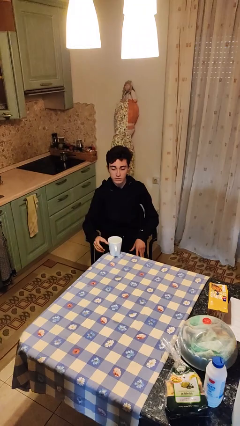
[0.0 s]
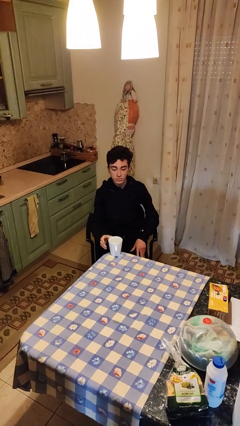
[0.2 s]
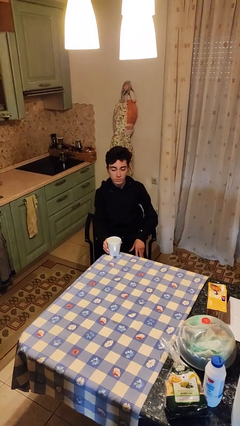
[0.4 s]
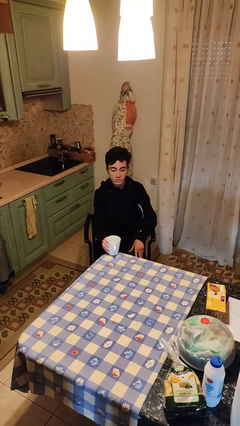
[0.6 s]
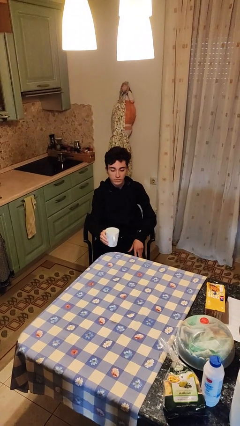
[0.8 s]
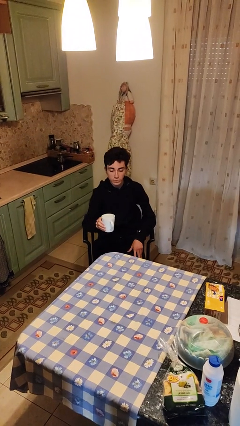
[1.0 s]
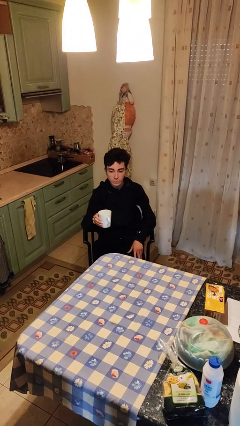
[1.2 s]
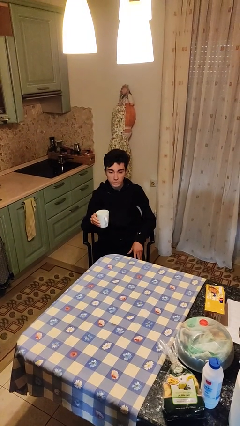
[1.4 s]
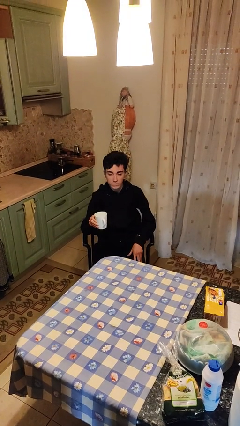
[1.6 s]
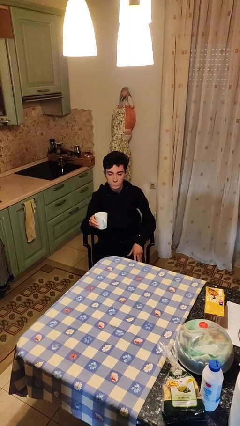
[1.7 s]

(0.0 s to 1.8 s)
person picks up object from table

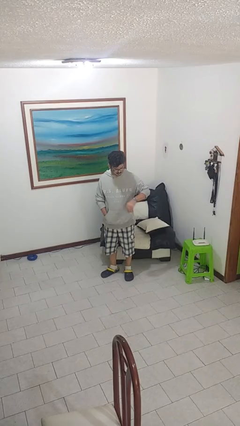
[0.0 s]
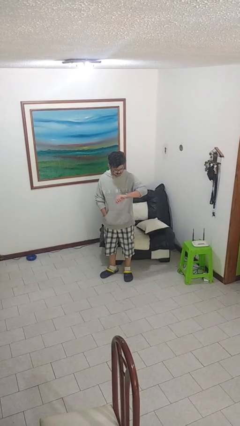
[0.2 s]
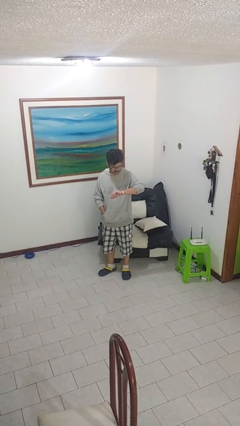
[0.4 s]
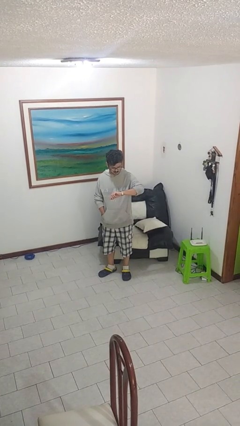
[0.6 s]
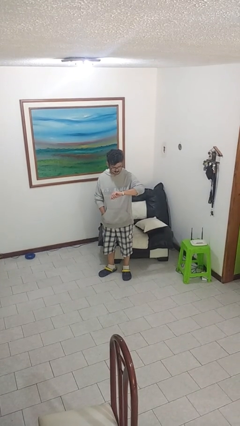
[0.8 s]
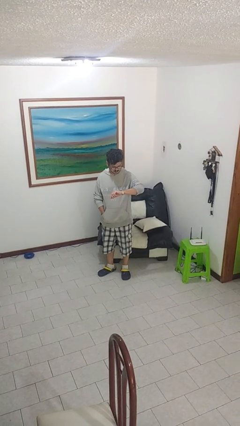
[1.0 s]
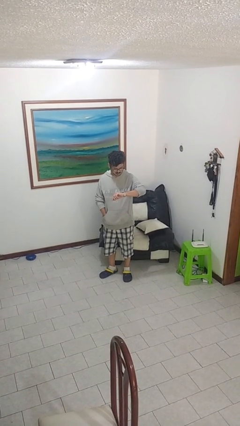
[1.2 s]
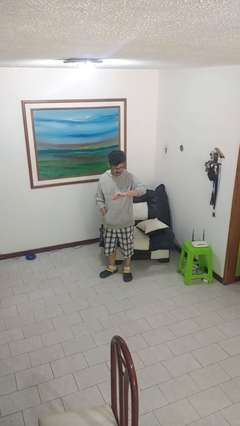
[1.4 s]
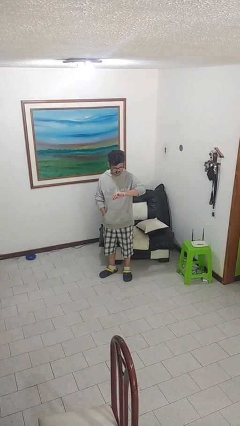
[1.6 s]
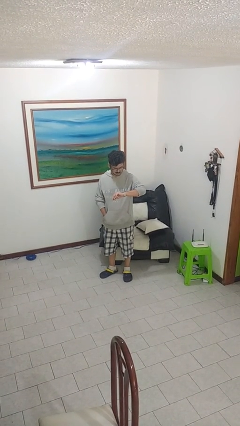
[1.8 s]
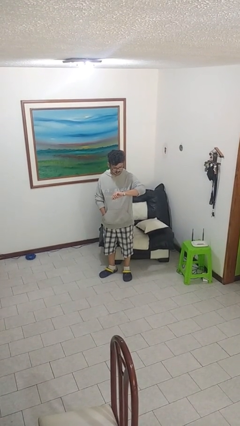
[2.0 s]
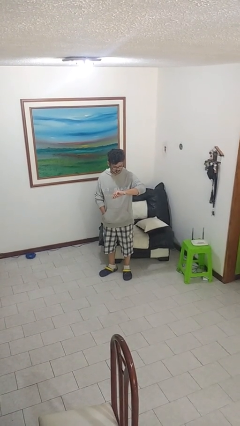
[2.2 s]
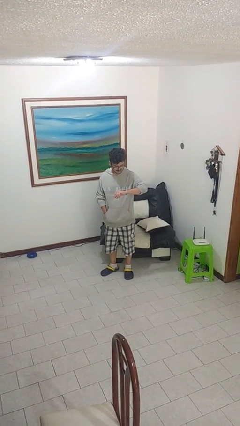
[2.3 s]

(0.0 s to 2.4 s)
person looks at wristwatch

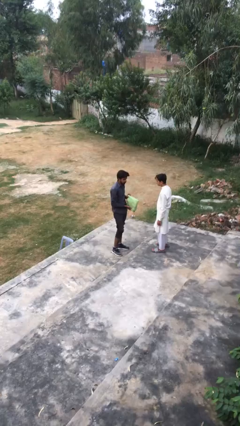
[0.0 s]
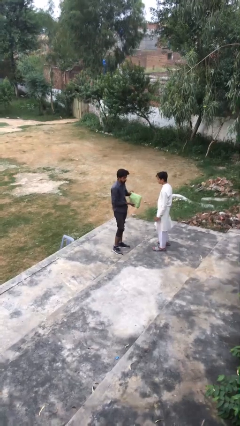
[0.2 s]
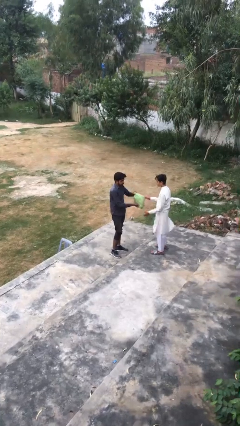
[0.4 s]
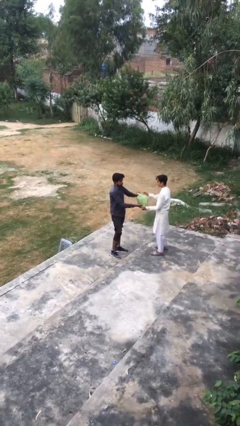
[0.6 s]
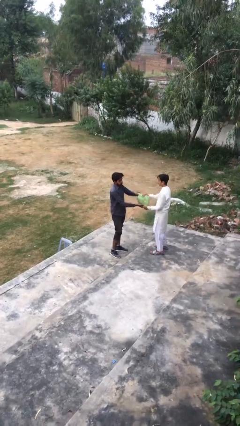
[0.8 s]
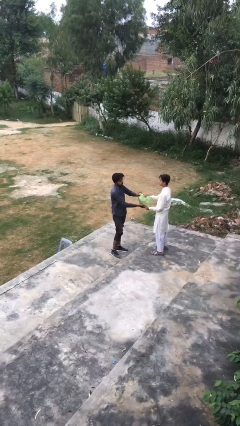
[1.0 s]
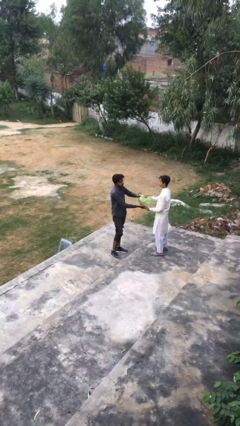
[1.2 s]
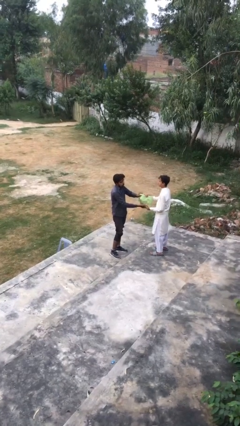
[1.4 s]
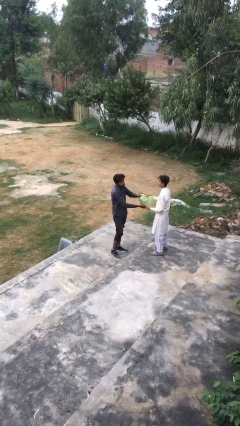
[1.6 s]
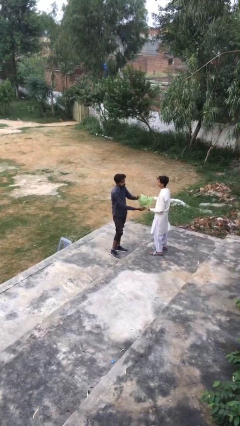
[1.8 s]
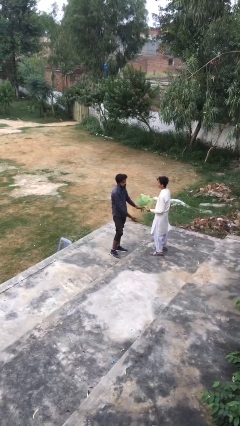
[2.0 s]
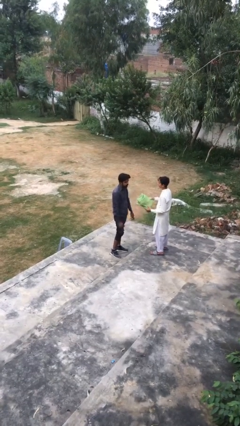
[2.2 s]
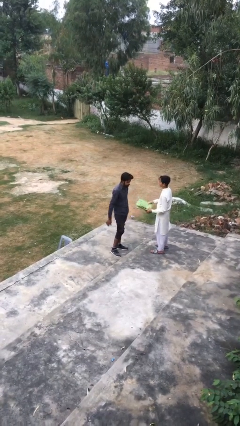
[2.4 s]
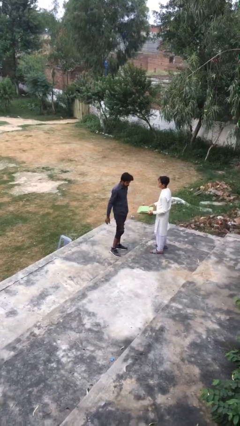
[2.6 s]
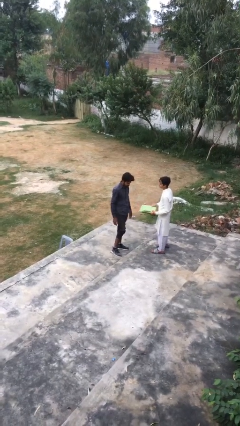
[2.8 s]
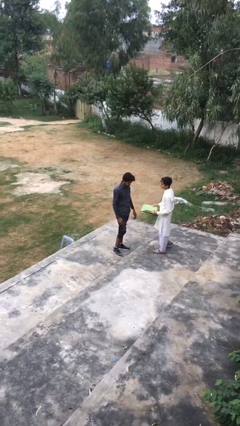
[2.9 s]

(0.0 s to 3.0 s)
person transfers object to person

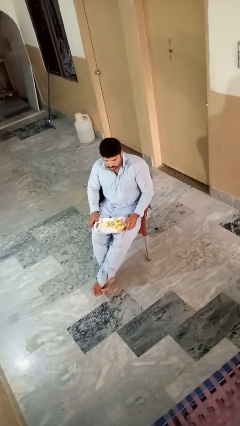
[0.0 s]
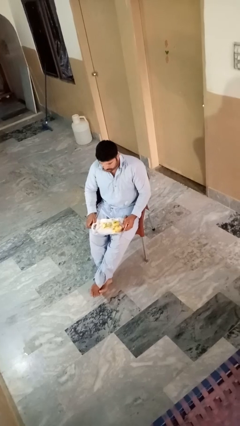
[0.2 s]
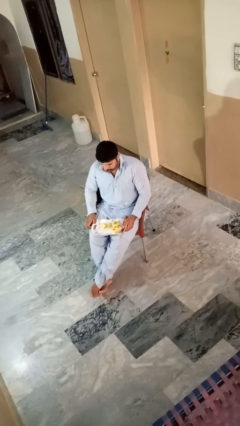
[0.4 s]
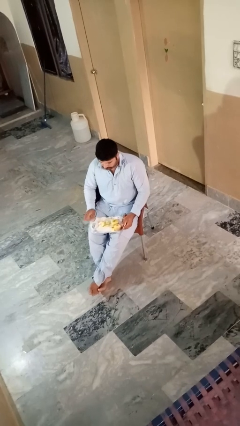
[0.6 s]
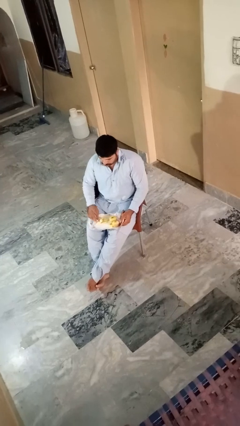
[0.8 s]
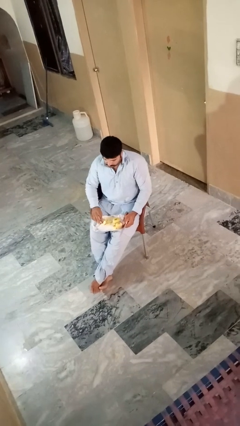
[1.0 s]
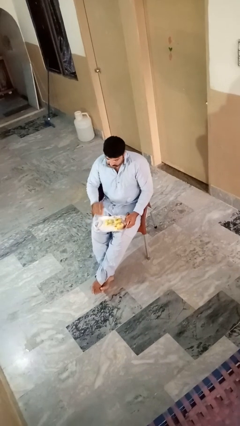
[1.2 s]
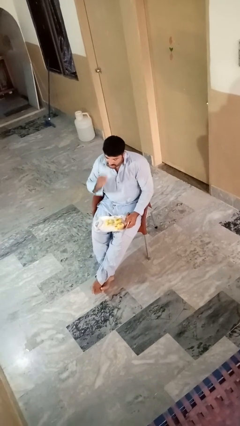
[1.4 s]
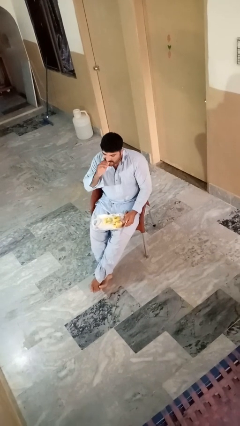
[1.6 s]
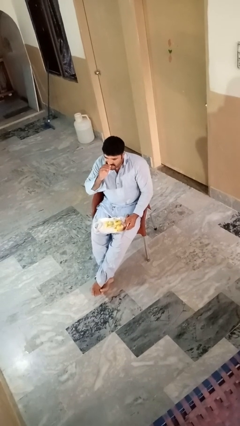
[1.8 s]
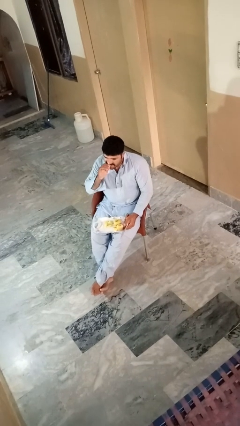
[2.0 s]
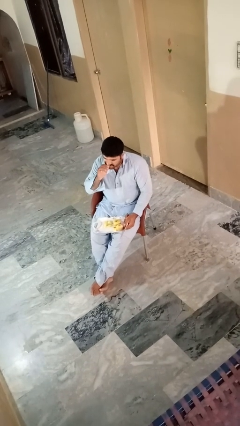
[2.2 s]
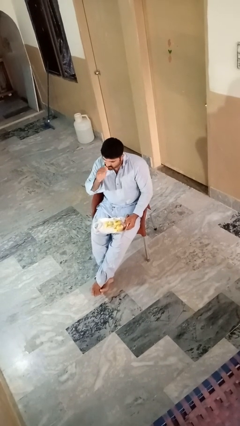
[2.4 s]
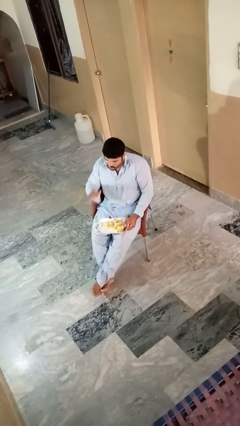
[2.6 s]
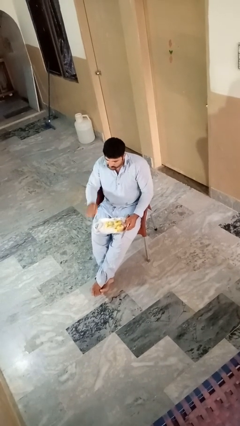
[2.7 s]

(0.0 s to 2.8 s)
person eats apple

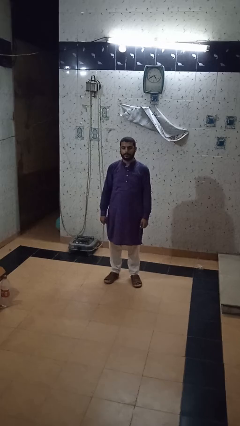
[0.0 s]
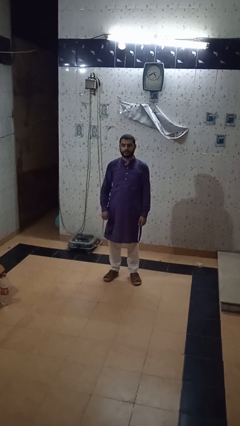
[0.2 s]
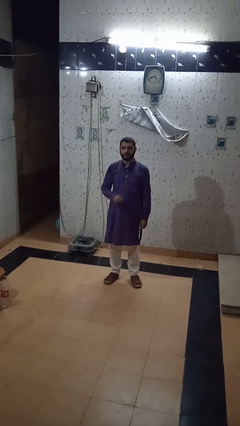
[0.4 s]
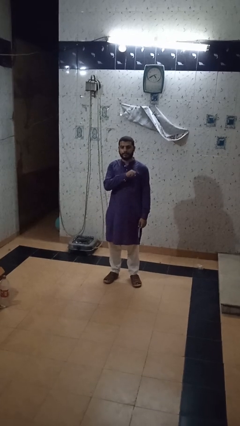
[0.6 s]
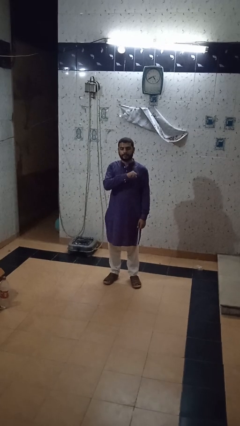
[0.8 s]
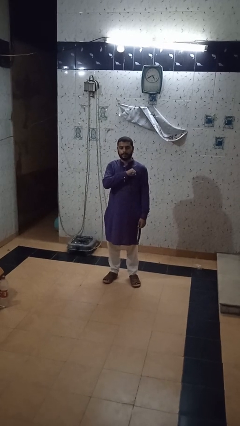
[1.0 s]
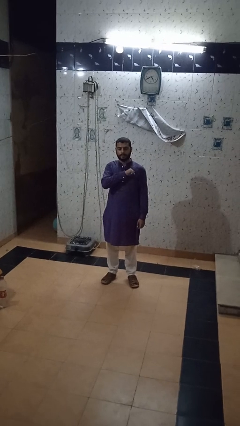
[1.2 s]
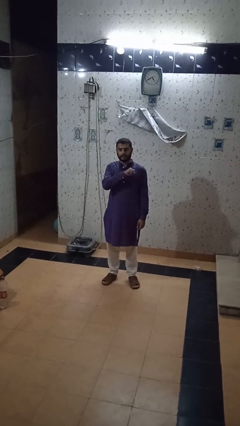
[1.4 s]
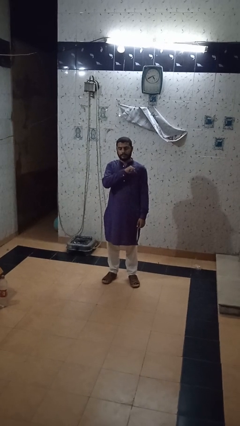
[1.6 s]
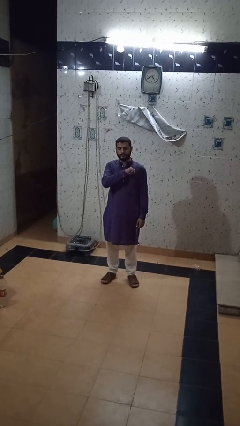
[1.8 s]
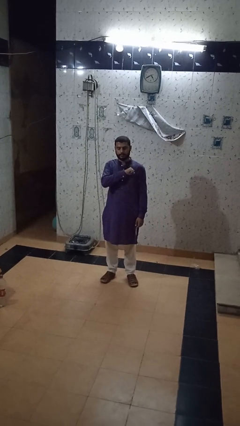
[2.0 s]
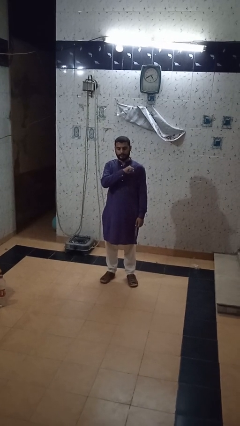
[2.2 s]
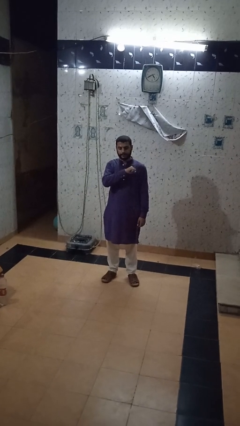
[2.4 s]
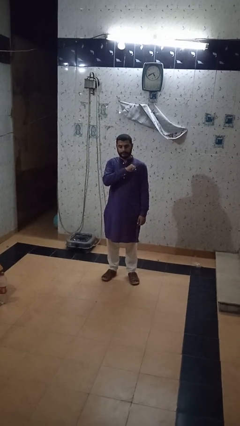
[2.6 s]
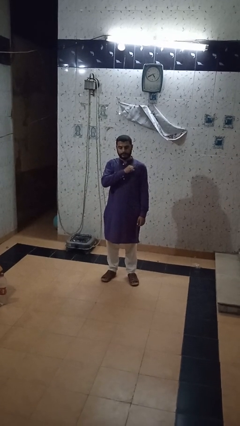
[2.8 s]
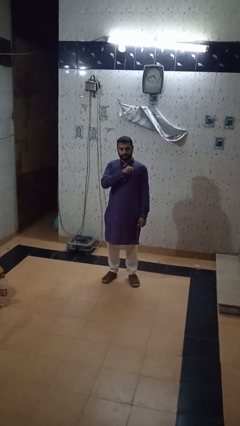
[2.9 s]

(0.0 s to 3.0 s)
person drums on chest

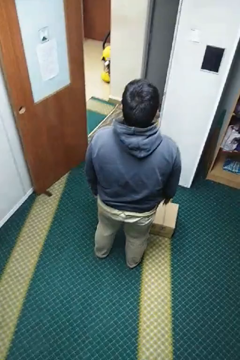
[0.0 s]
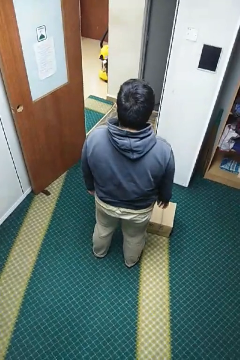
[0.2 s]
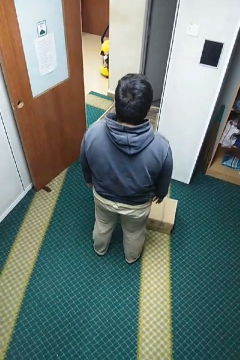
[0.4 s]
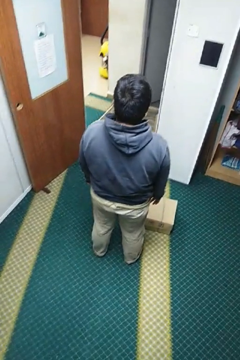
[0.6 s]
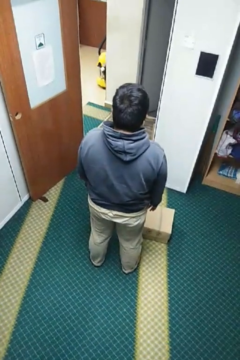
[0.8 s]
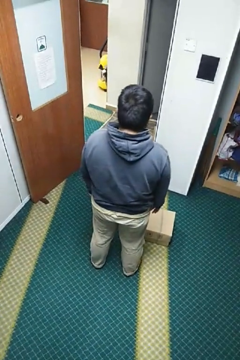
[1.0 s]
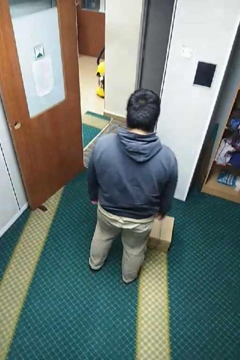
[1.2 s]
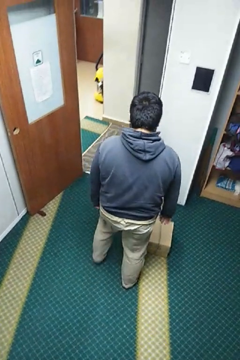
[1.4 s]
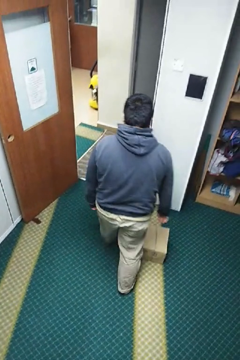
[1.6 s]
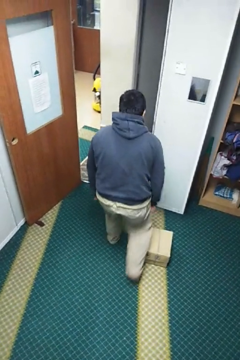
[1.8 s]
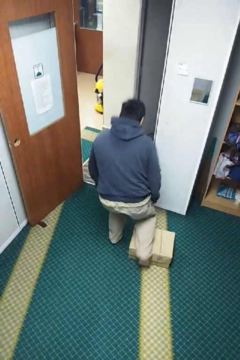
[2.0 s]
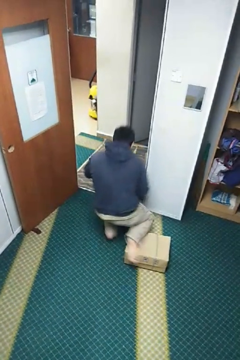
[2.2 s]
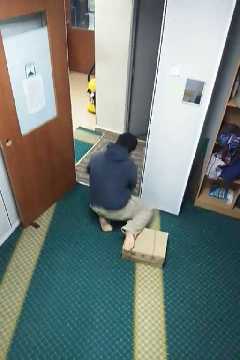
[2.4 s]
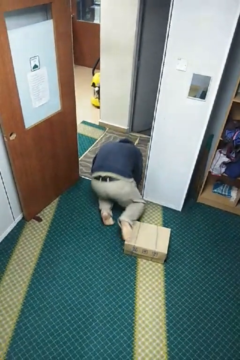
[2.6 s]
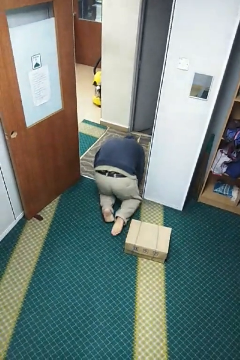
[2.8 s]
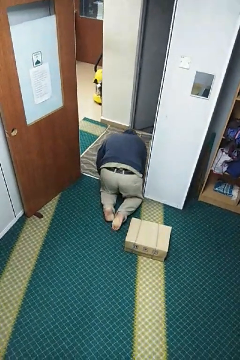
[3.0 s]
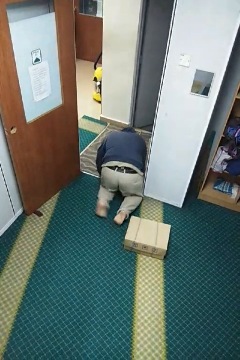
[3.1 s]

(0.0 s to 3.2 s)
person trips on object on floor

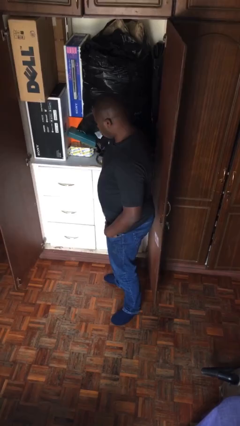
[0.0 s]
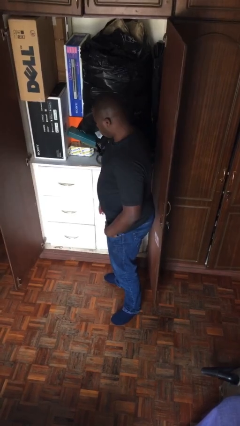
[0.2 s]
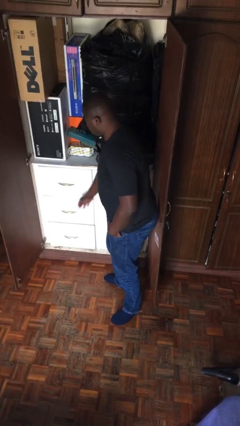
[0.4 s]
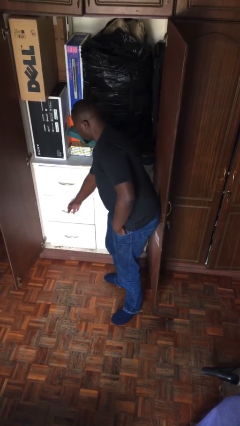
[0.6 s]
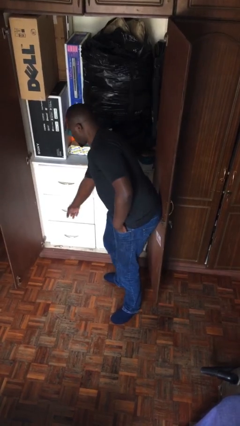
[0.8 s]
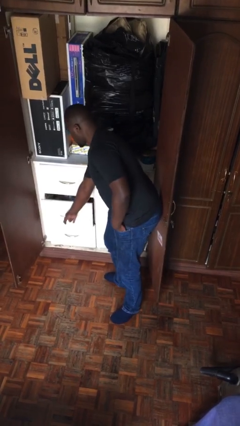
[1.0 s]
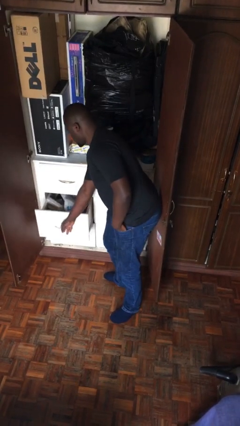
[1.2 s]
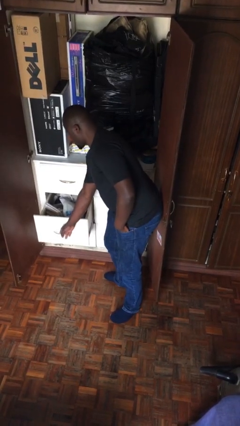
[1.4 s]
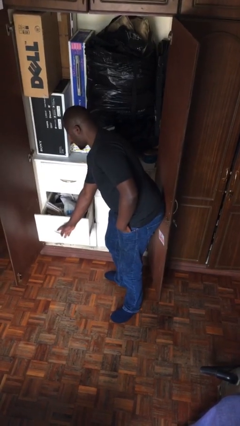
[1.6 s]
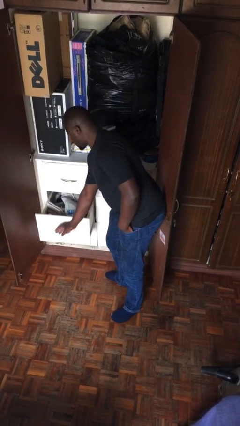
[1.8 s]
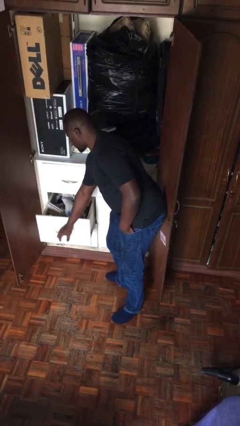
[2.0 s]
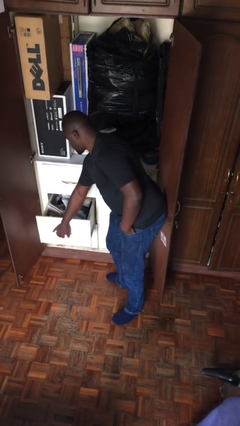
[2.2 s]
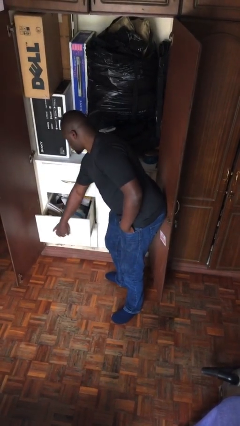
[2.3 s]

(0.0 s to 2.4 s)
person opens dresser drawer
